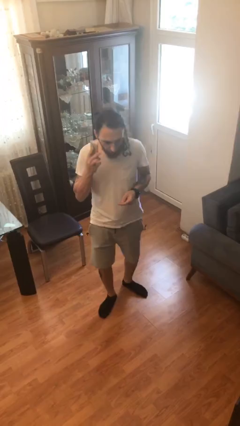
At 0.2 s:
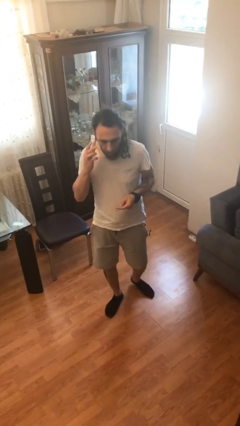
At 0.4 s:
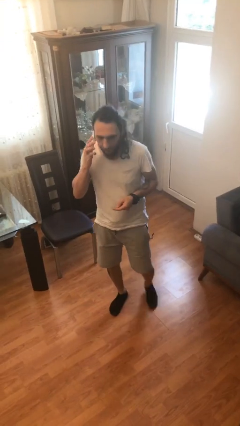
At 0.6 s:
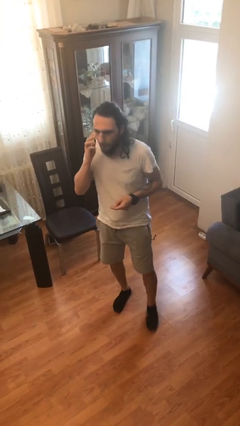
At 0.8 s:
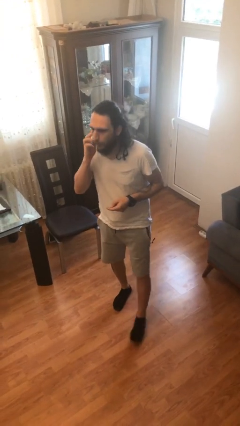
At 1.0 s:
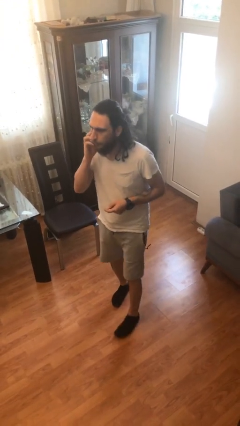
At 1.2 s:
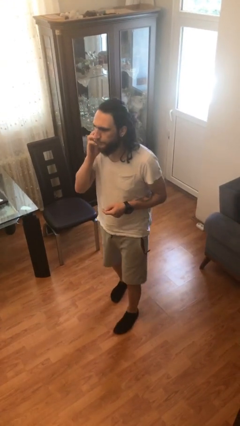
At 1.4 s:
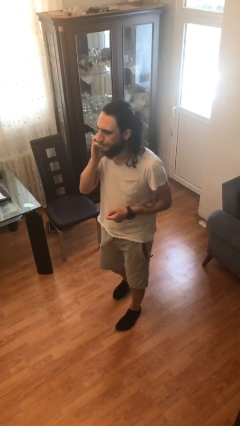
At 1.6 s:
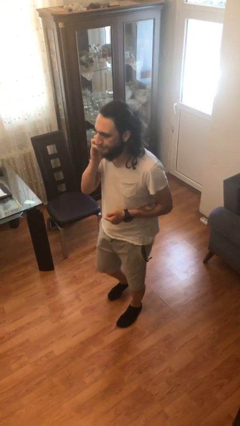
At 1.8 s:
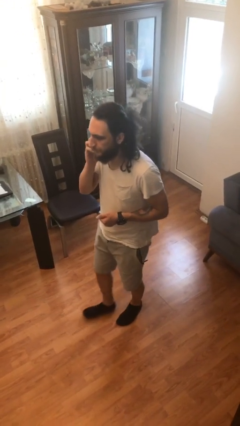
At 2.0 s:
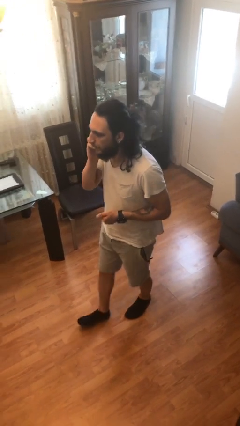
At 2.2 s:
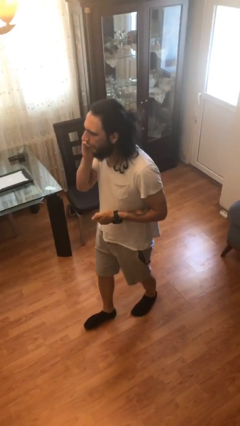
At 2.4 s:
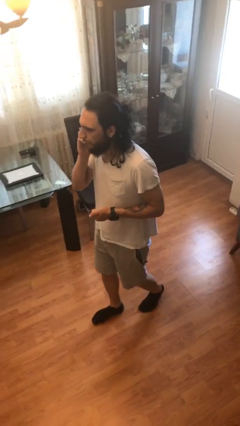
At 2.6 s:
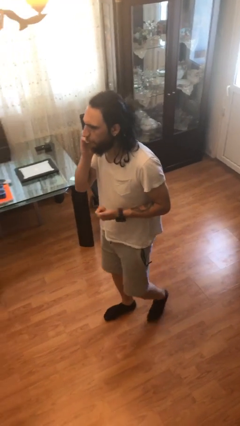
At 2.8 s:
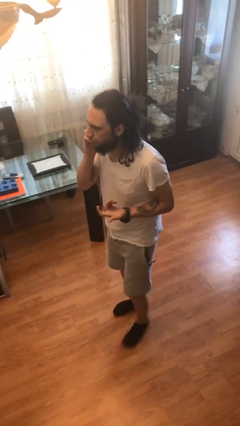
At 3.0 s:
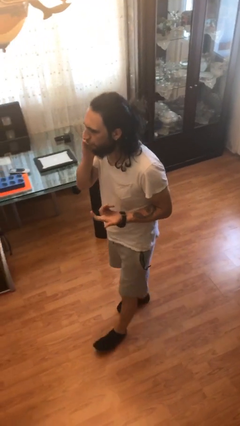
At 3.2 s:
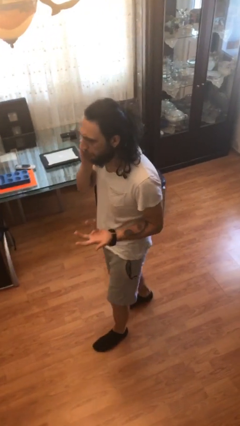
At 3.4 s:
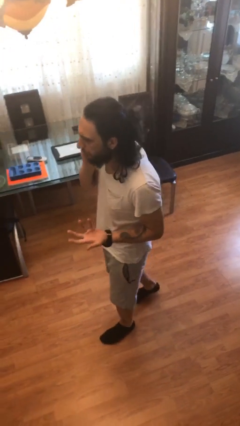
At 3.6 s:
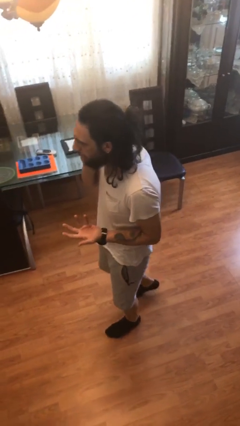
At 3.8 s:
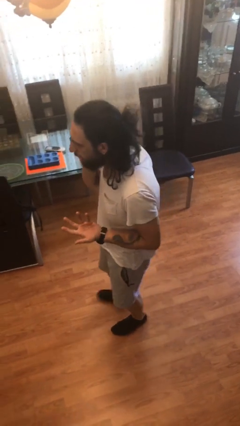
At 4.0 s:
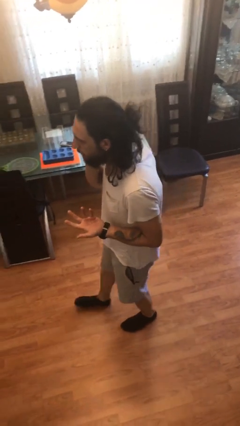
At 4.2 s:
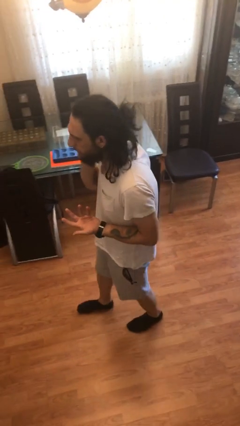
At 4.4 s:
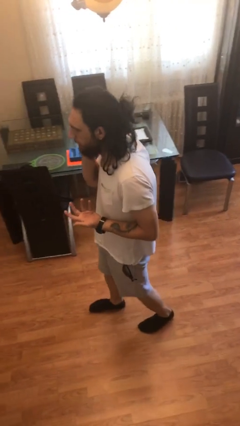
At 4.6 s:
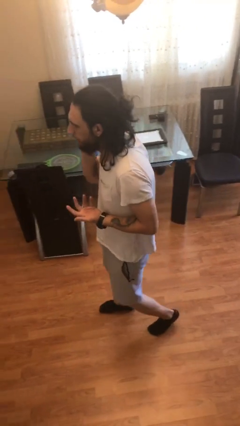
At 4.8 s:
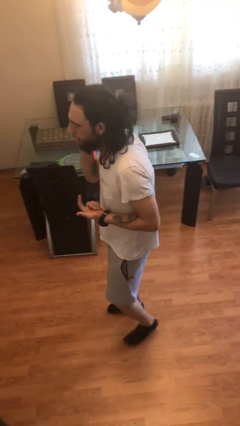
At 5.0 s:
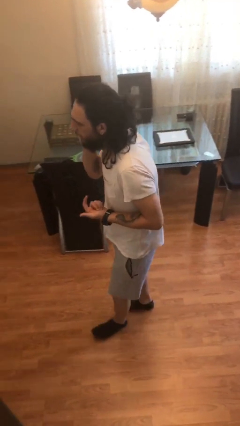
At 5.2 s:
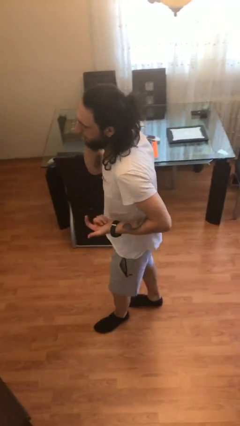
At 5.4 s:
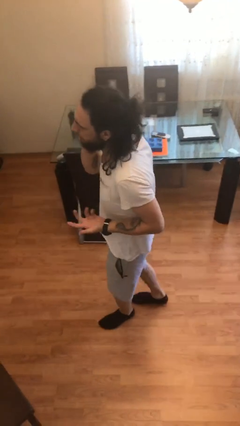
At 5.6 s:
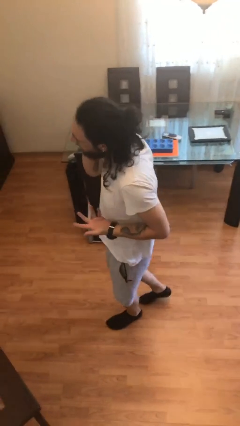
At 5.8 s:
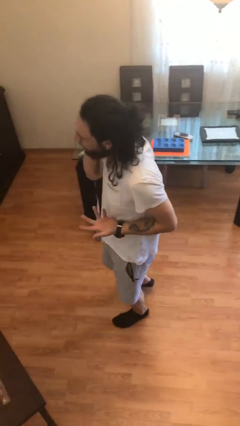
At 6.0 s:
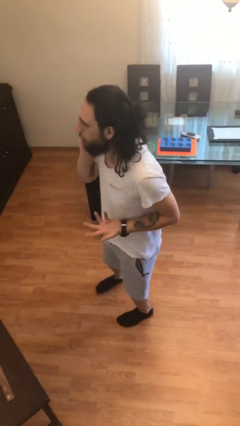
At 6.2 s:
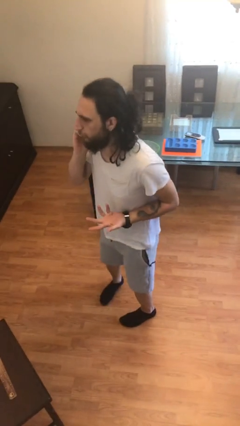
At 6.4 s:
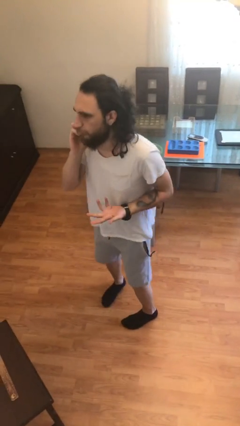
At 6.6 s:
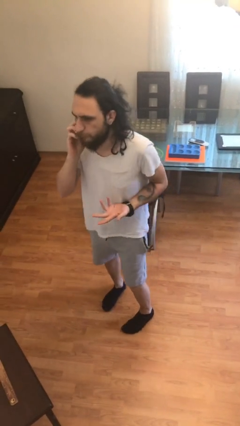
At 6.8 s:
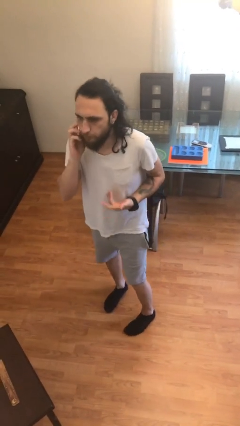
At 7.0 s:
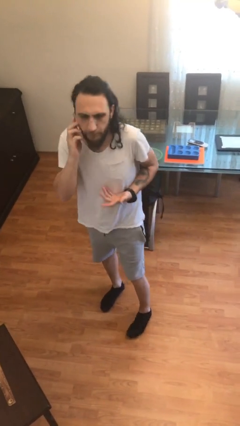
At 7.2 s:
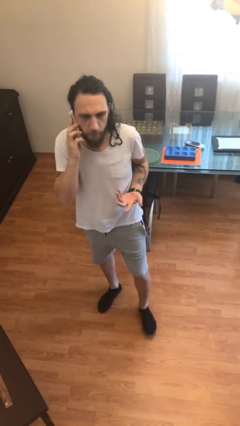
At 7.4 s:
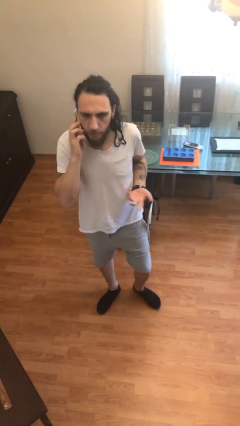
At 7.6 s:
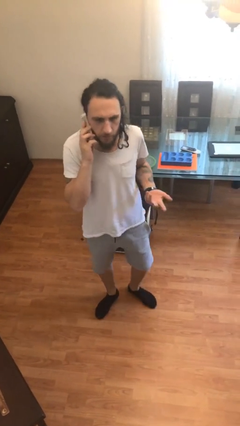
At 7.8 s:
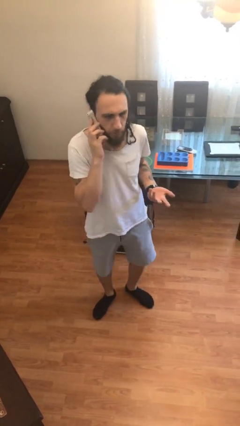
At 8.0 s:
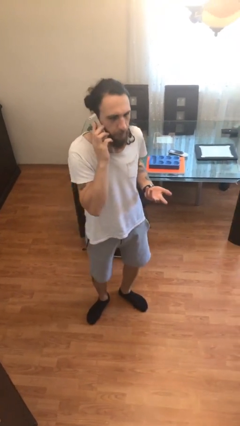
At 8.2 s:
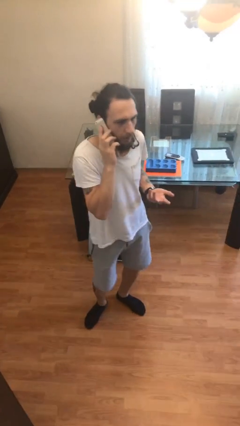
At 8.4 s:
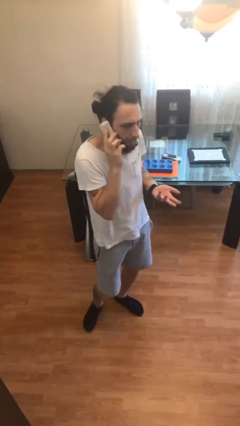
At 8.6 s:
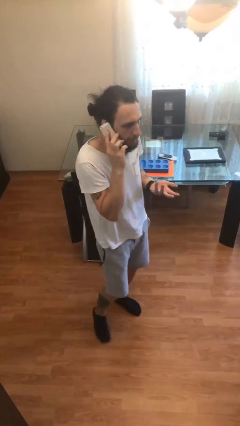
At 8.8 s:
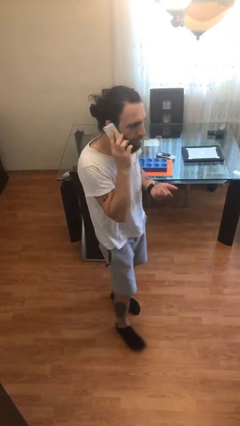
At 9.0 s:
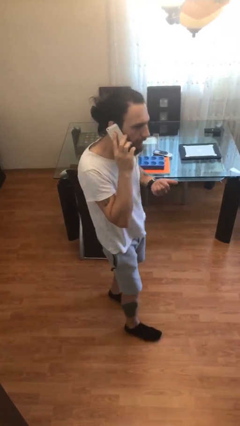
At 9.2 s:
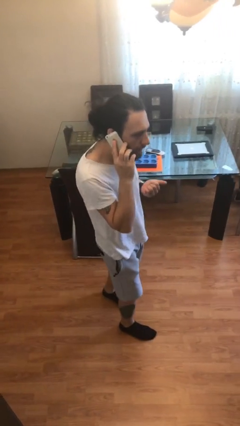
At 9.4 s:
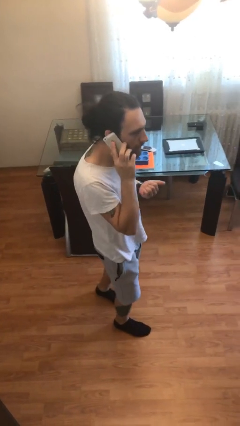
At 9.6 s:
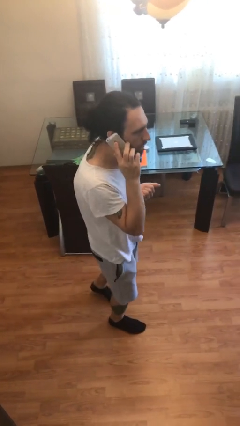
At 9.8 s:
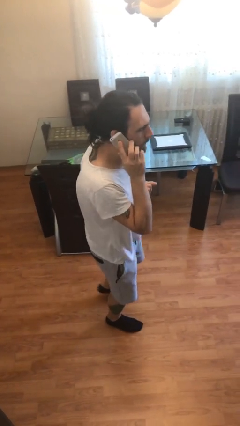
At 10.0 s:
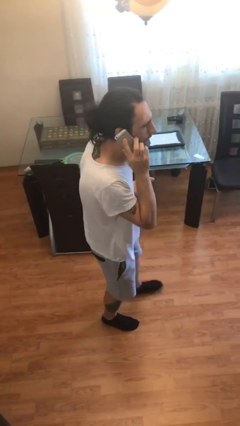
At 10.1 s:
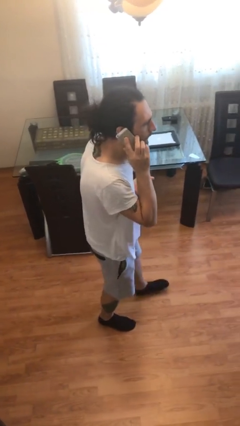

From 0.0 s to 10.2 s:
person talks on phone

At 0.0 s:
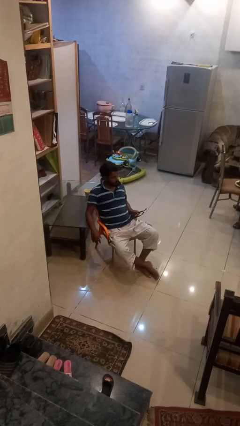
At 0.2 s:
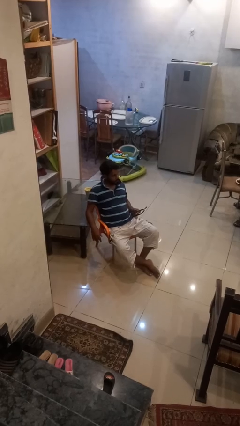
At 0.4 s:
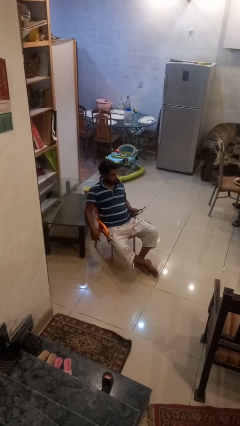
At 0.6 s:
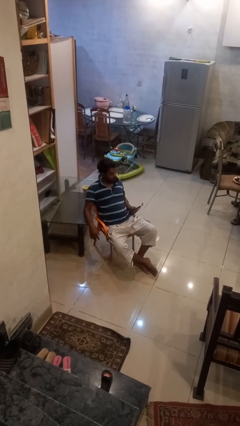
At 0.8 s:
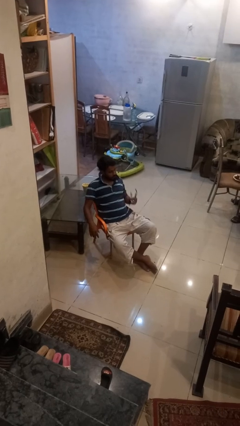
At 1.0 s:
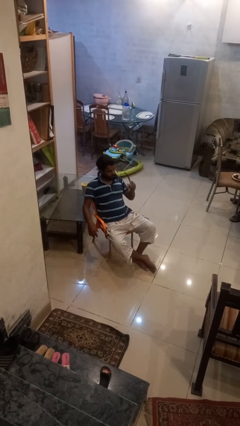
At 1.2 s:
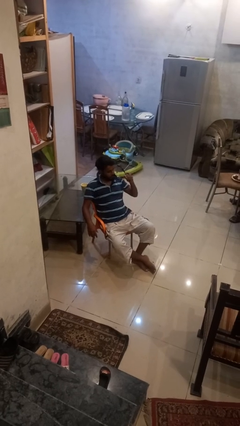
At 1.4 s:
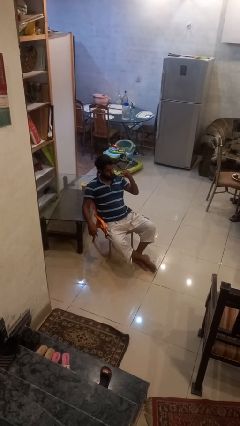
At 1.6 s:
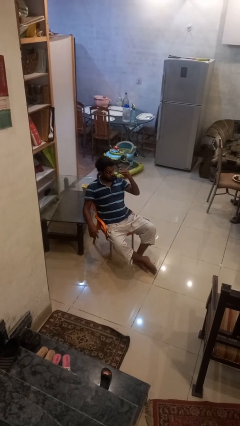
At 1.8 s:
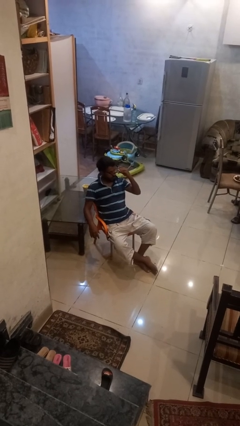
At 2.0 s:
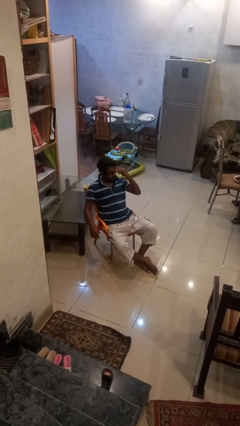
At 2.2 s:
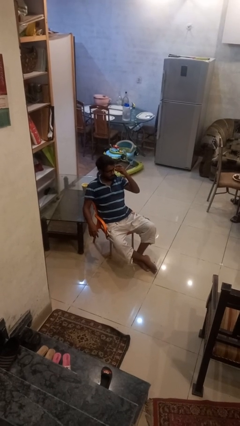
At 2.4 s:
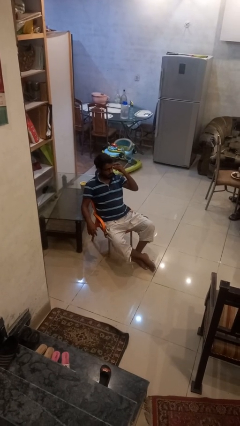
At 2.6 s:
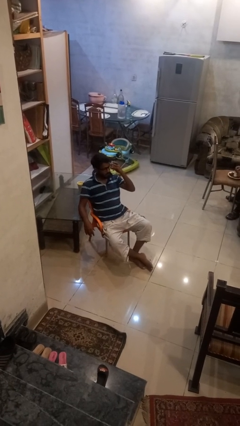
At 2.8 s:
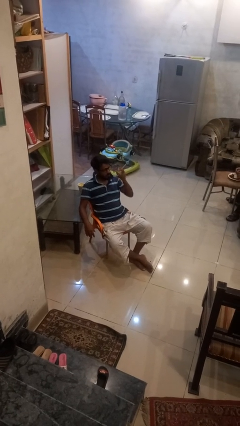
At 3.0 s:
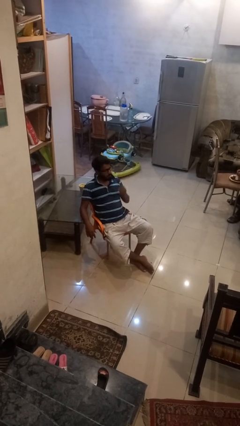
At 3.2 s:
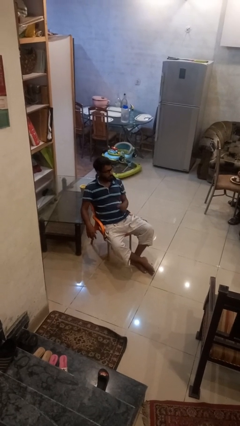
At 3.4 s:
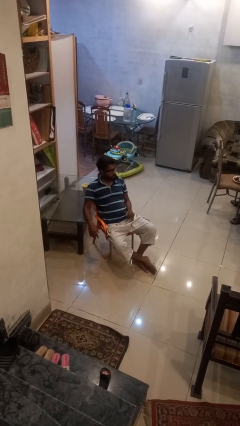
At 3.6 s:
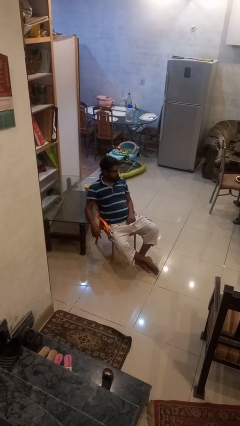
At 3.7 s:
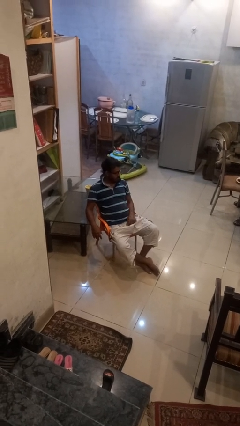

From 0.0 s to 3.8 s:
person puts on glasses

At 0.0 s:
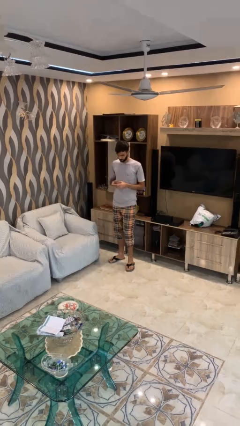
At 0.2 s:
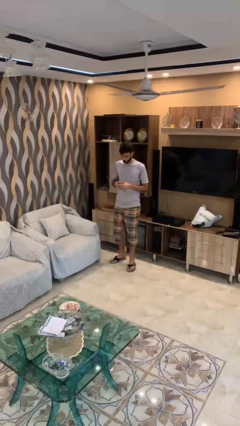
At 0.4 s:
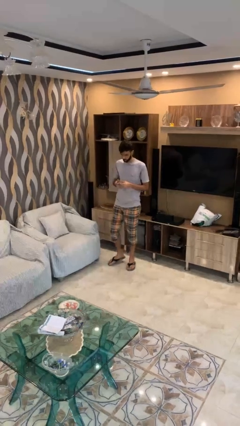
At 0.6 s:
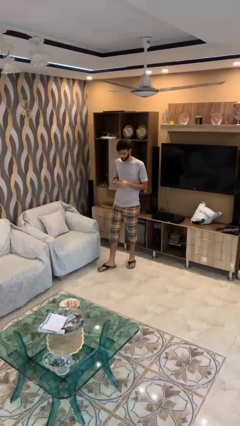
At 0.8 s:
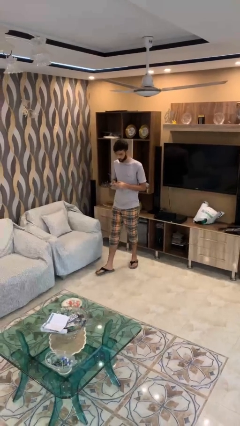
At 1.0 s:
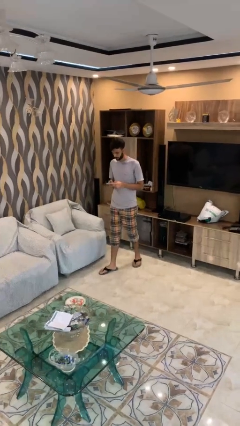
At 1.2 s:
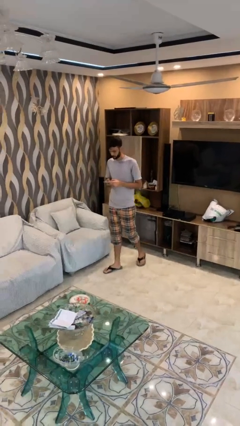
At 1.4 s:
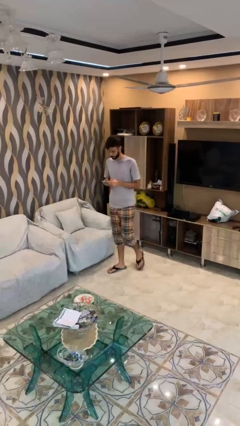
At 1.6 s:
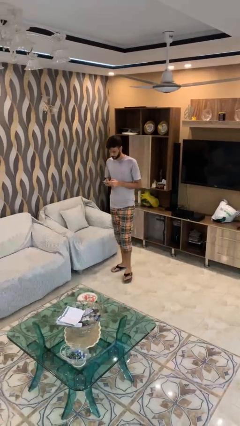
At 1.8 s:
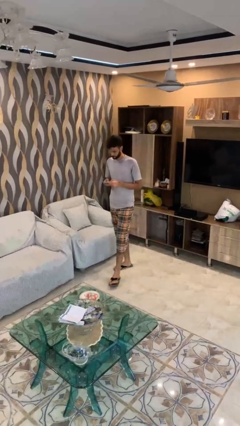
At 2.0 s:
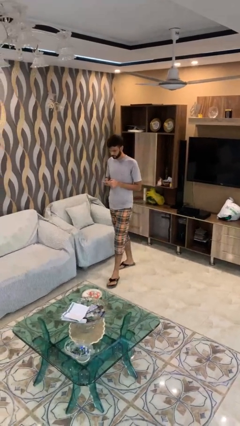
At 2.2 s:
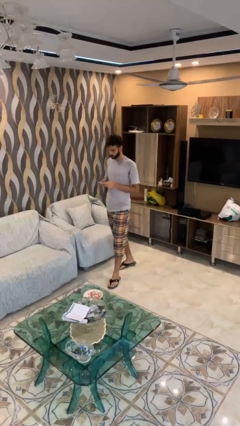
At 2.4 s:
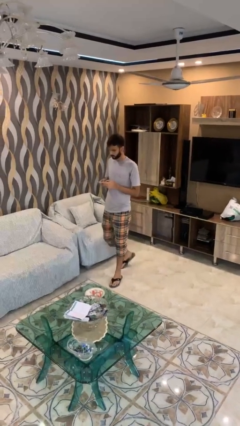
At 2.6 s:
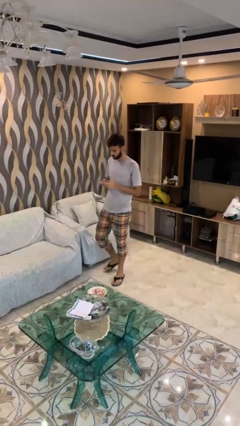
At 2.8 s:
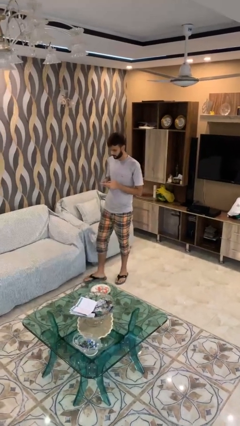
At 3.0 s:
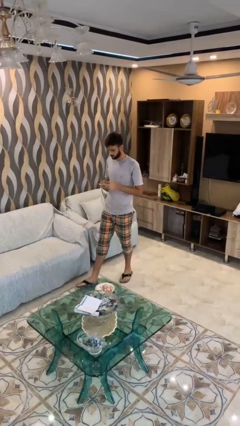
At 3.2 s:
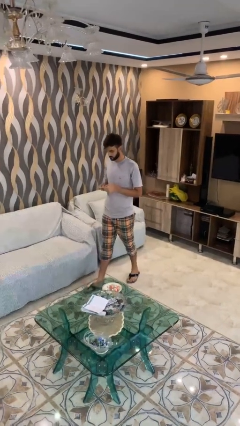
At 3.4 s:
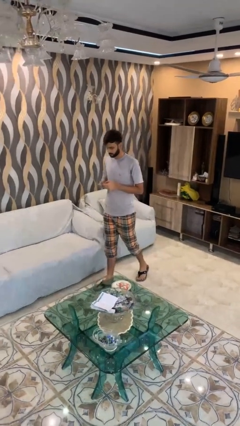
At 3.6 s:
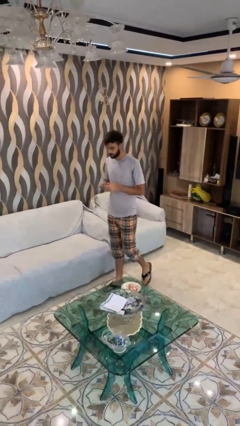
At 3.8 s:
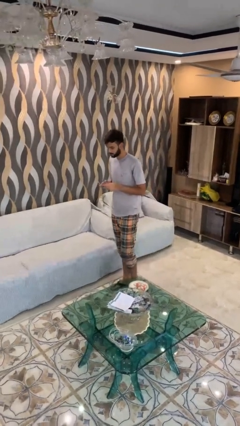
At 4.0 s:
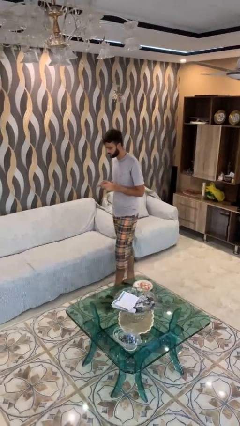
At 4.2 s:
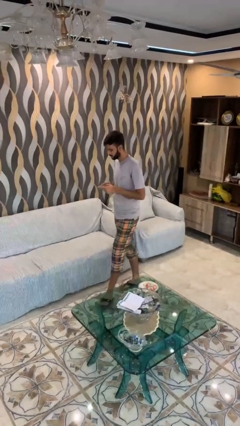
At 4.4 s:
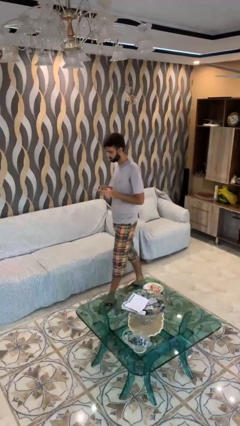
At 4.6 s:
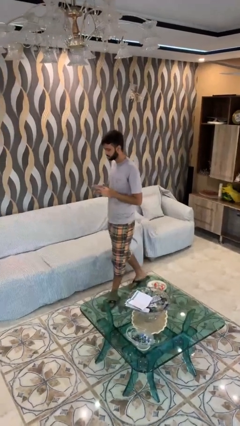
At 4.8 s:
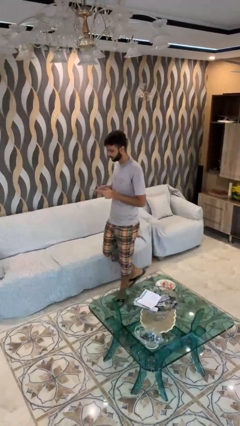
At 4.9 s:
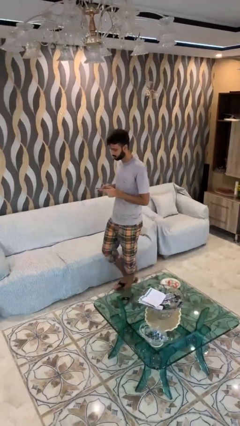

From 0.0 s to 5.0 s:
person texts on phone
